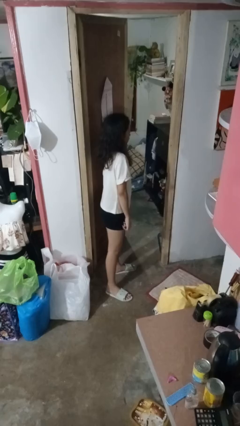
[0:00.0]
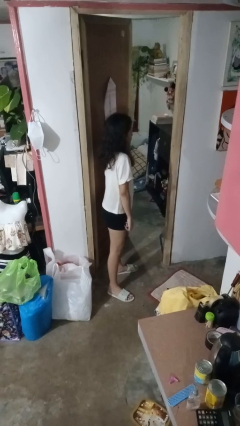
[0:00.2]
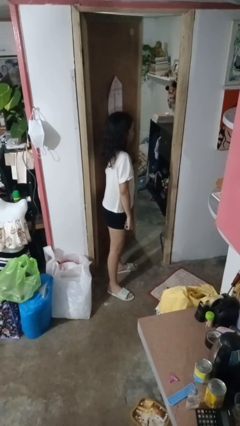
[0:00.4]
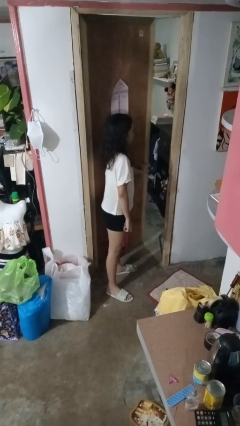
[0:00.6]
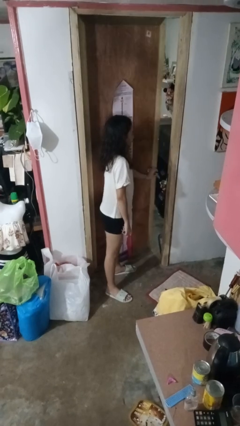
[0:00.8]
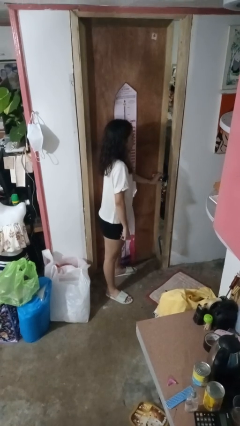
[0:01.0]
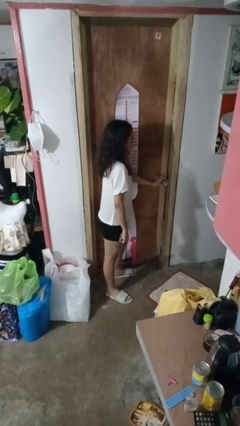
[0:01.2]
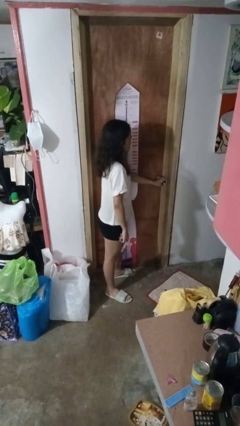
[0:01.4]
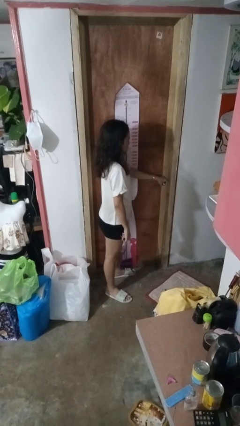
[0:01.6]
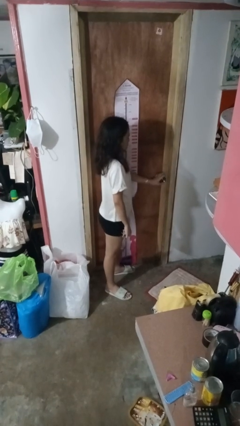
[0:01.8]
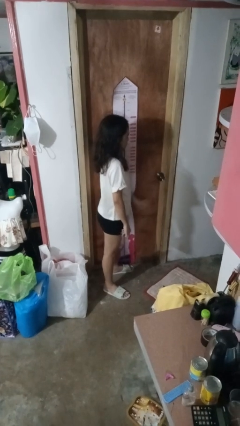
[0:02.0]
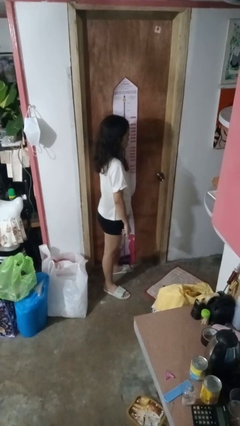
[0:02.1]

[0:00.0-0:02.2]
person closes facility door

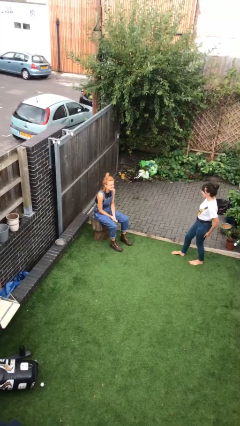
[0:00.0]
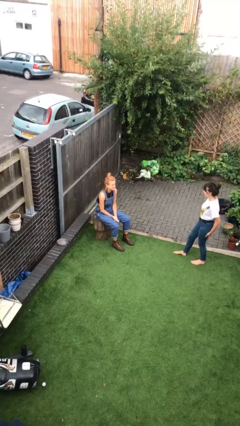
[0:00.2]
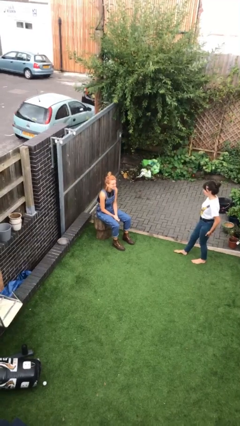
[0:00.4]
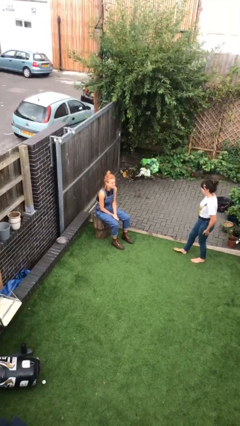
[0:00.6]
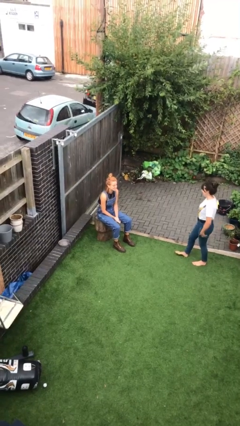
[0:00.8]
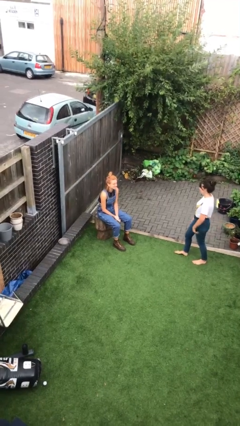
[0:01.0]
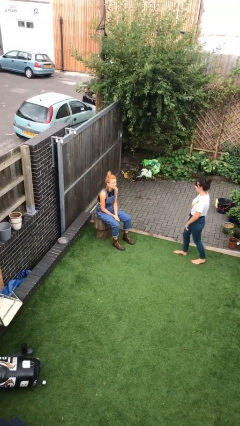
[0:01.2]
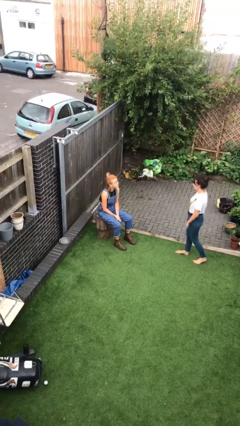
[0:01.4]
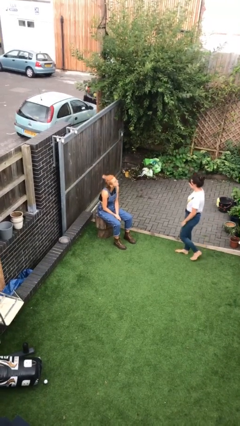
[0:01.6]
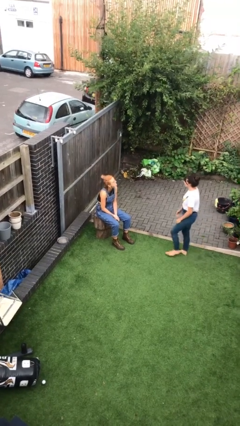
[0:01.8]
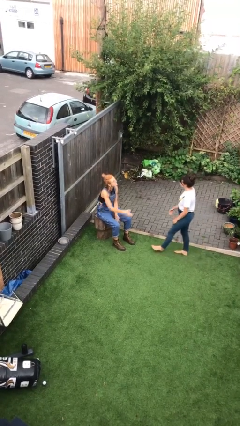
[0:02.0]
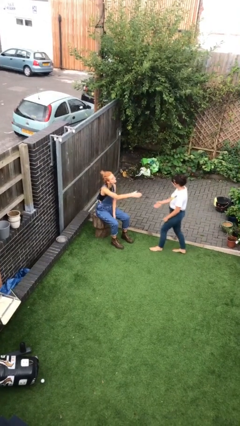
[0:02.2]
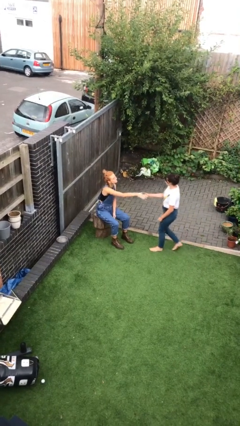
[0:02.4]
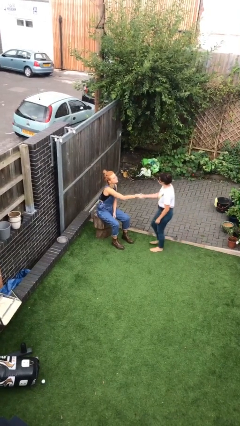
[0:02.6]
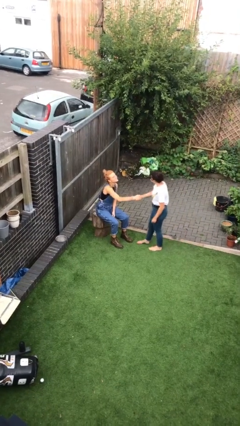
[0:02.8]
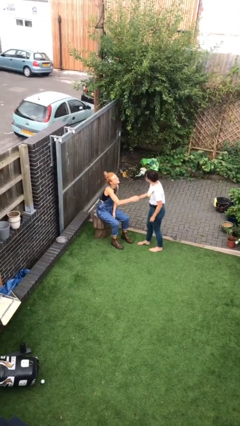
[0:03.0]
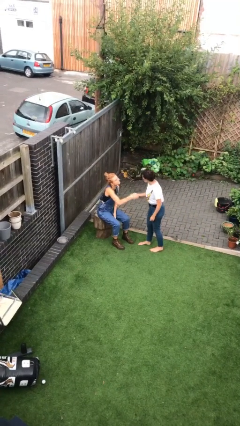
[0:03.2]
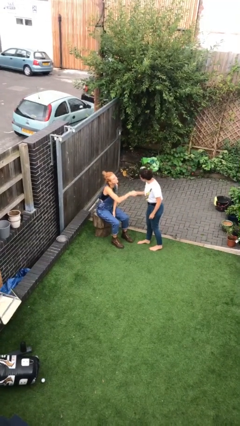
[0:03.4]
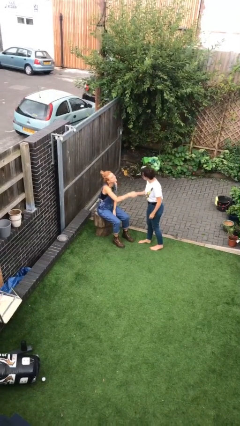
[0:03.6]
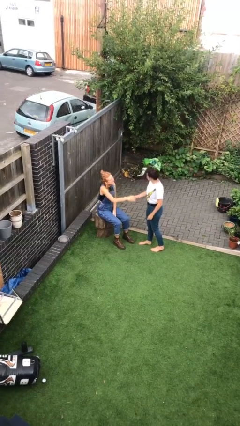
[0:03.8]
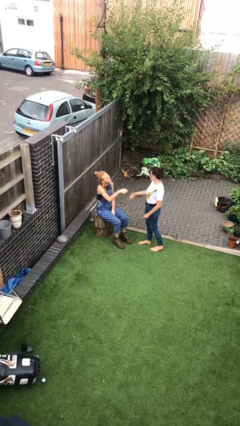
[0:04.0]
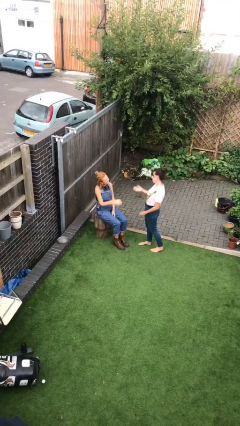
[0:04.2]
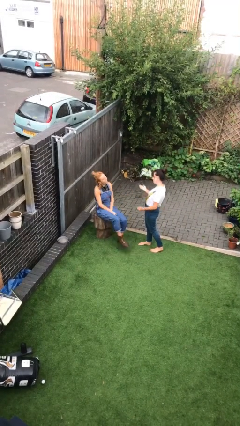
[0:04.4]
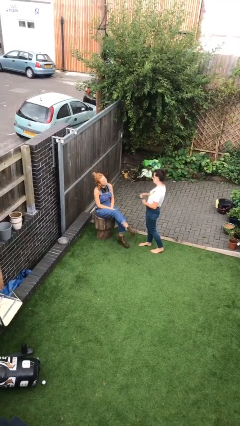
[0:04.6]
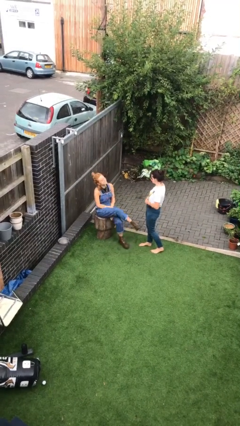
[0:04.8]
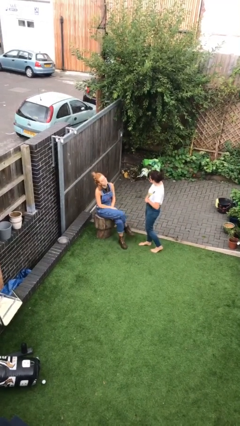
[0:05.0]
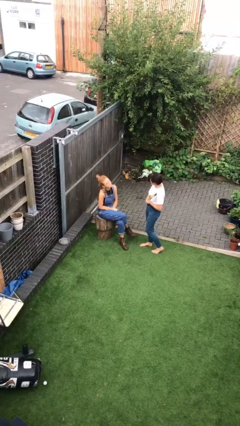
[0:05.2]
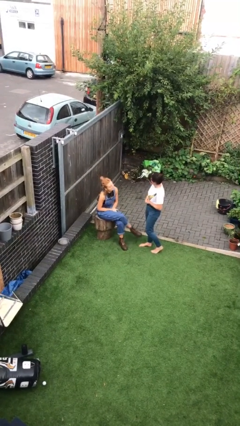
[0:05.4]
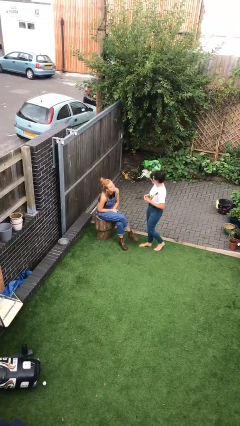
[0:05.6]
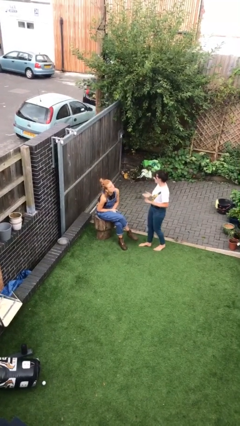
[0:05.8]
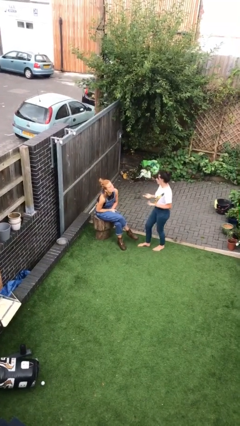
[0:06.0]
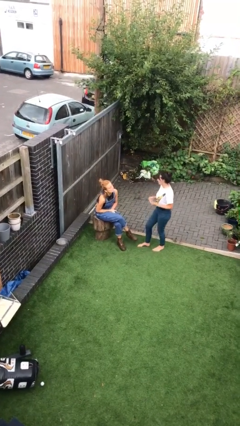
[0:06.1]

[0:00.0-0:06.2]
person shakes hand

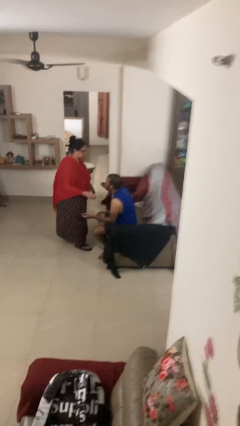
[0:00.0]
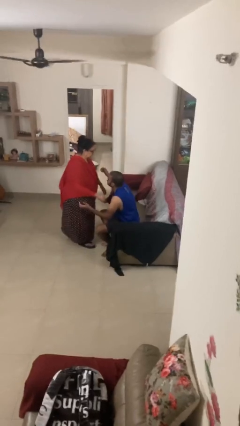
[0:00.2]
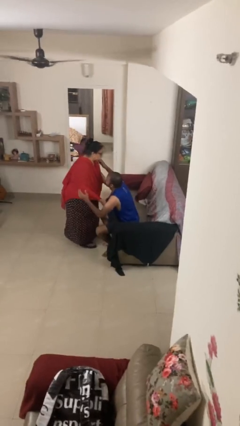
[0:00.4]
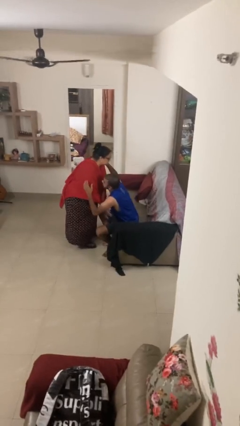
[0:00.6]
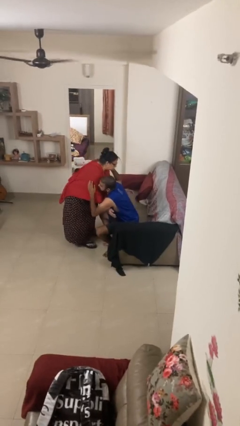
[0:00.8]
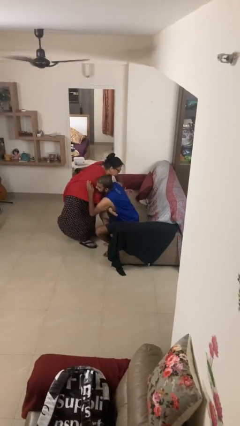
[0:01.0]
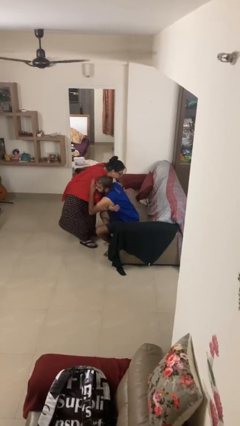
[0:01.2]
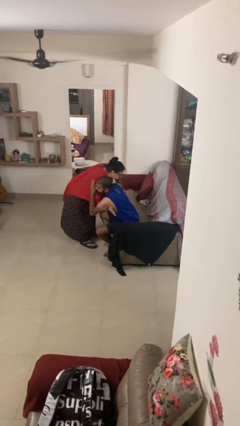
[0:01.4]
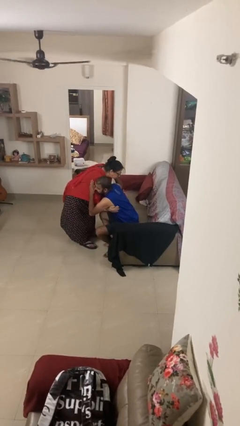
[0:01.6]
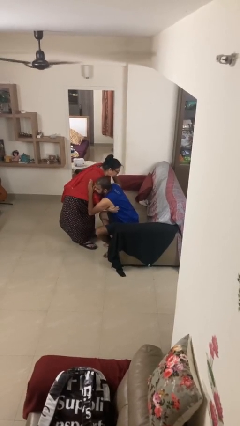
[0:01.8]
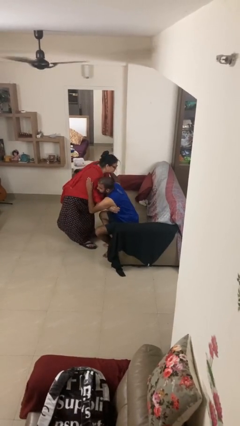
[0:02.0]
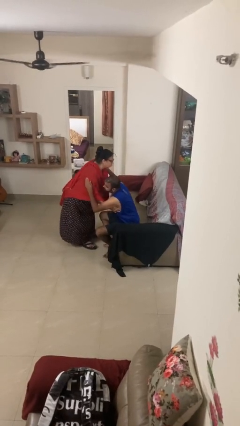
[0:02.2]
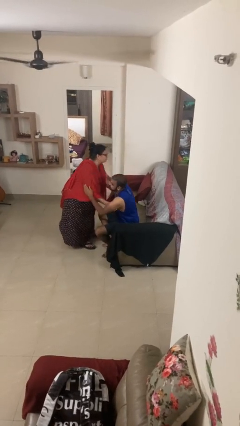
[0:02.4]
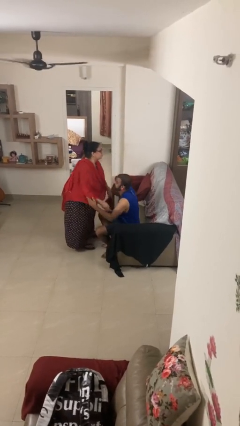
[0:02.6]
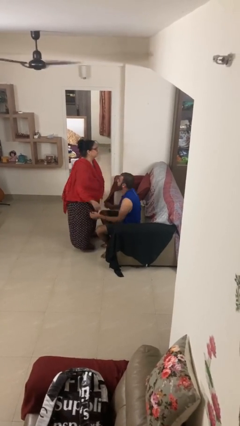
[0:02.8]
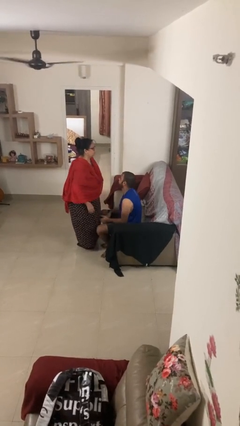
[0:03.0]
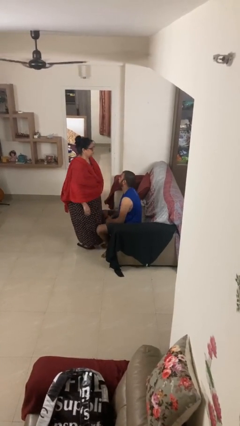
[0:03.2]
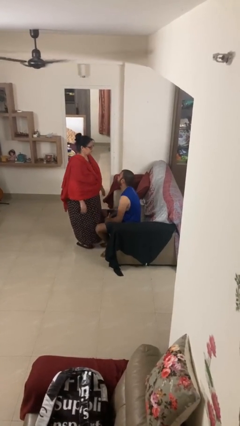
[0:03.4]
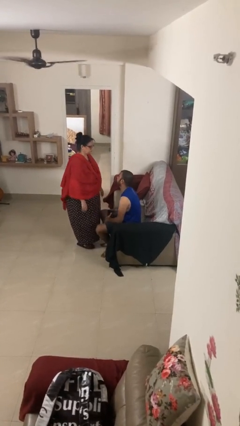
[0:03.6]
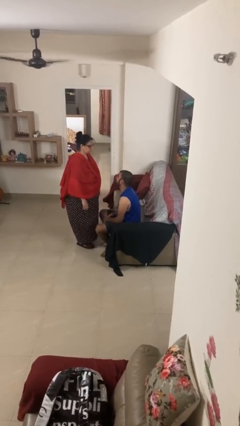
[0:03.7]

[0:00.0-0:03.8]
person embraces person

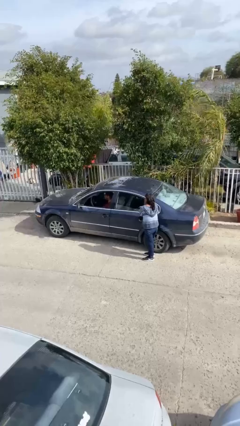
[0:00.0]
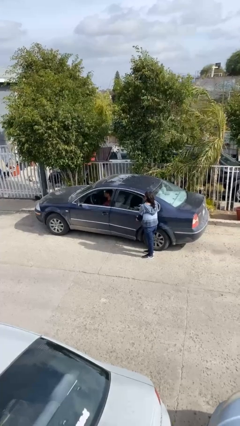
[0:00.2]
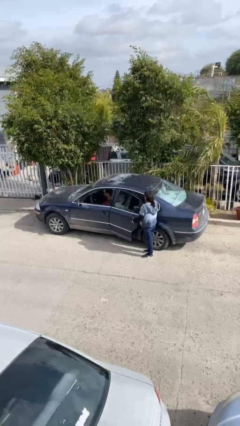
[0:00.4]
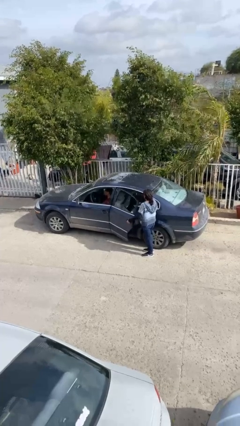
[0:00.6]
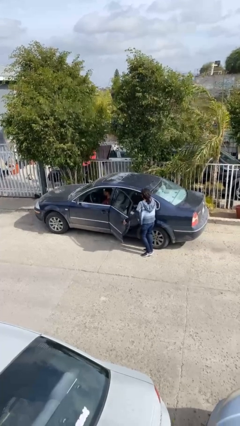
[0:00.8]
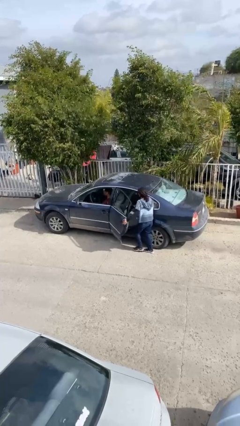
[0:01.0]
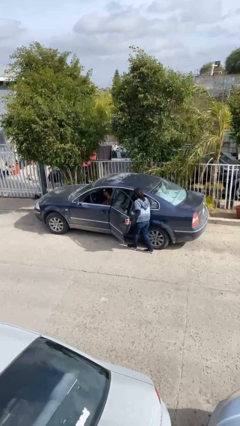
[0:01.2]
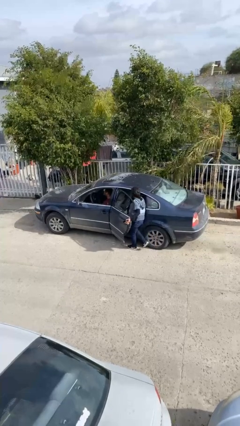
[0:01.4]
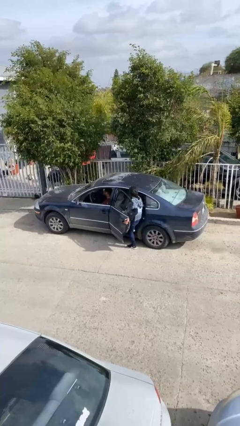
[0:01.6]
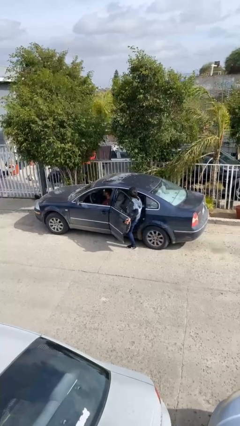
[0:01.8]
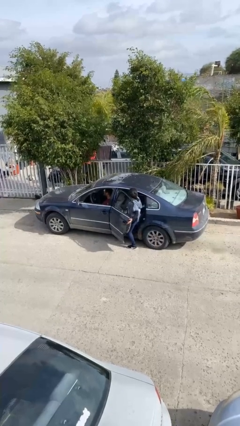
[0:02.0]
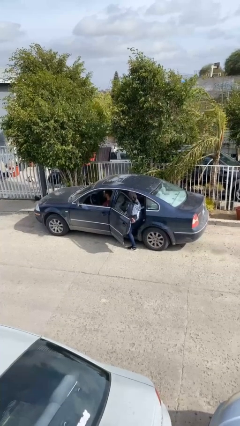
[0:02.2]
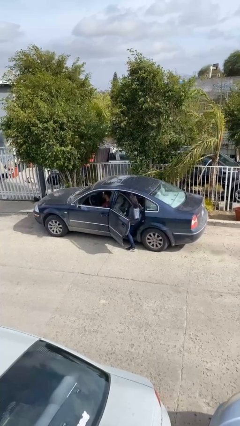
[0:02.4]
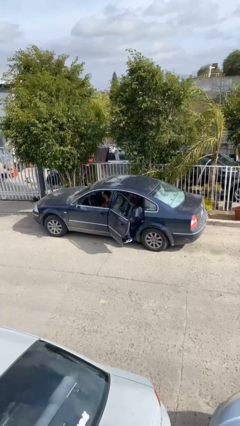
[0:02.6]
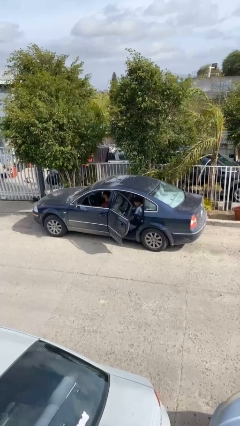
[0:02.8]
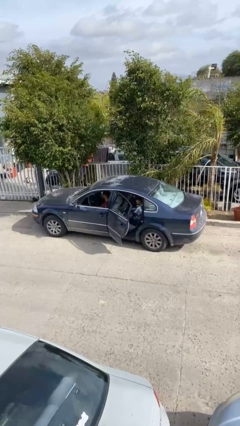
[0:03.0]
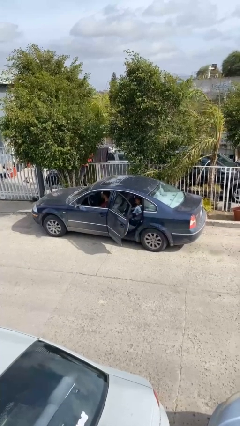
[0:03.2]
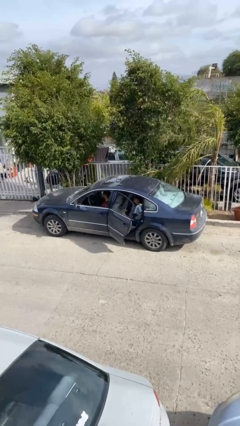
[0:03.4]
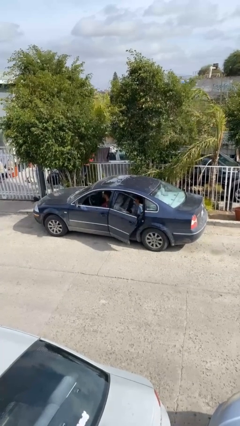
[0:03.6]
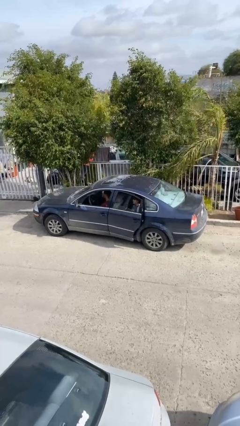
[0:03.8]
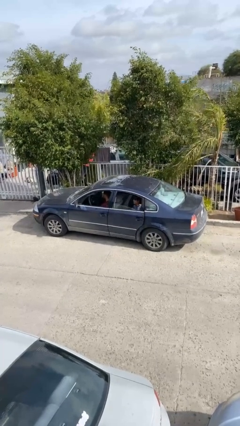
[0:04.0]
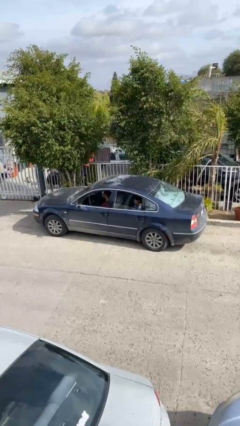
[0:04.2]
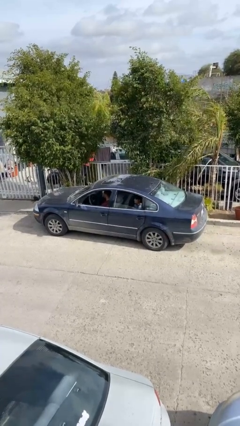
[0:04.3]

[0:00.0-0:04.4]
car picks up person

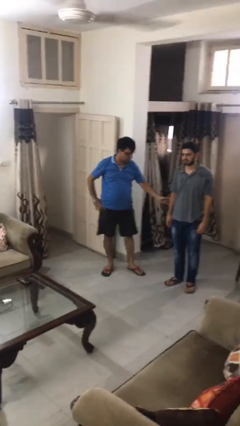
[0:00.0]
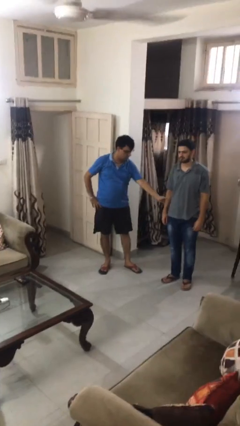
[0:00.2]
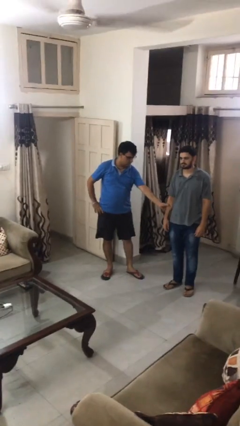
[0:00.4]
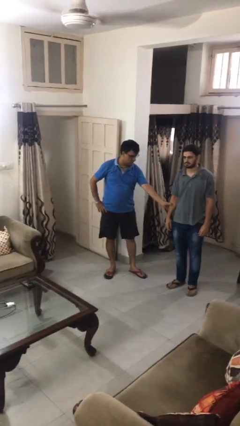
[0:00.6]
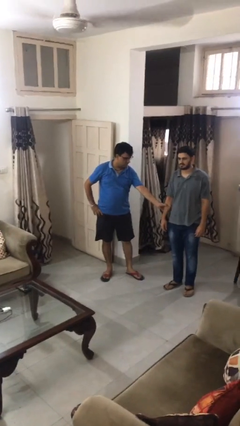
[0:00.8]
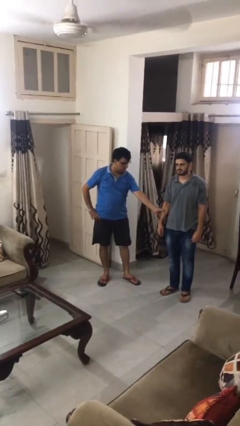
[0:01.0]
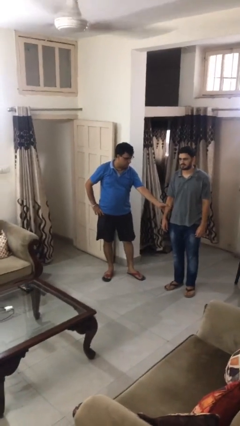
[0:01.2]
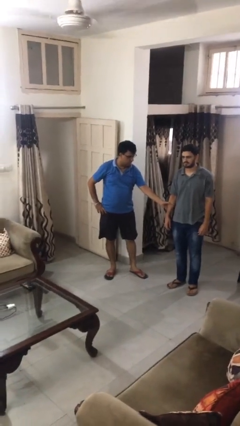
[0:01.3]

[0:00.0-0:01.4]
person grabs person by forearm
